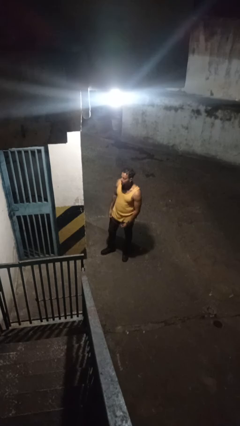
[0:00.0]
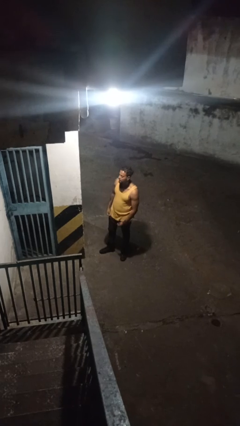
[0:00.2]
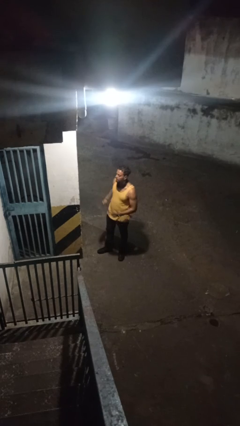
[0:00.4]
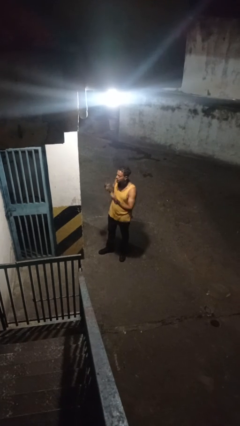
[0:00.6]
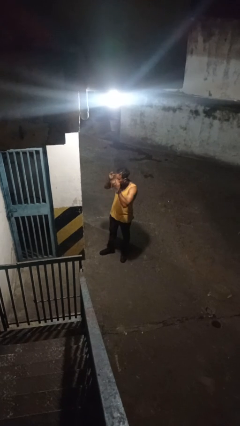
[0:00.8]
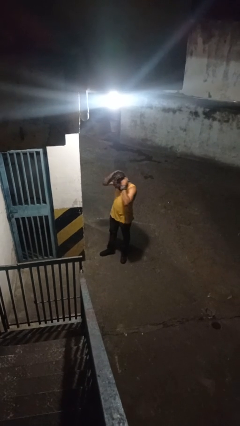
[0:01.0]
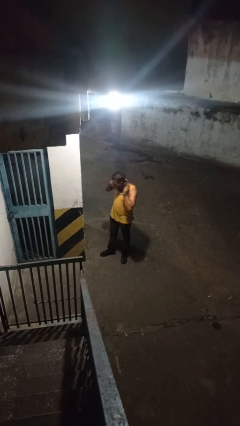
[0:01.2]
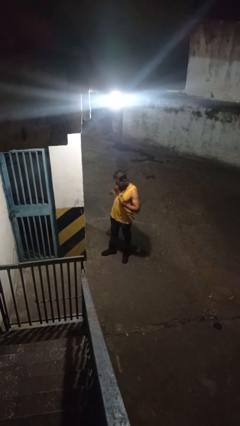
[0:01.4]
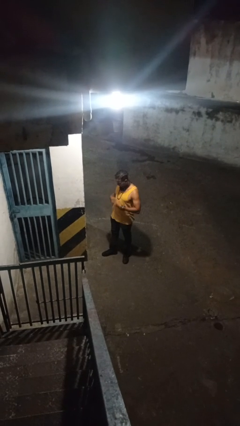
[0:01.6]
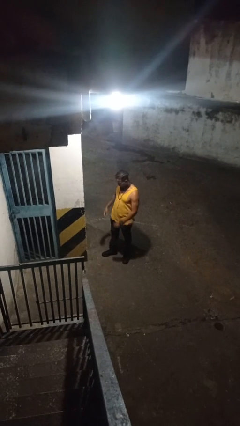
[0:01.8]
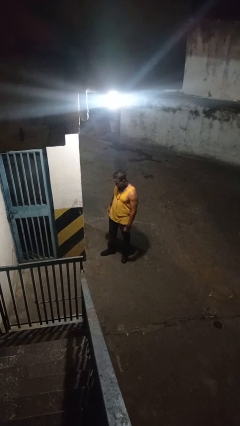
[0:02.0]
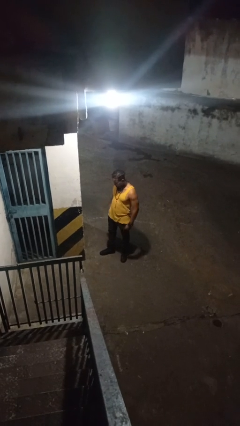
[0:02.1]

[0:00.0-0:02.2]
person puts on necklace

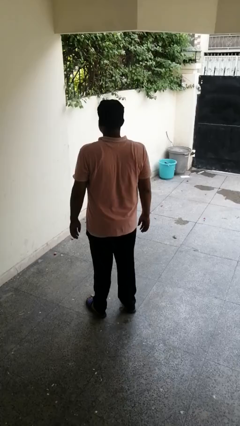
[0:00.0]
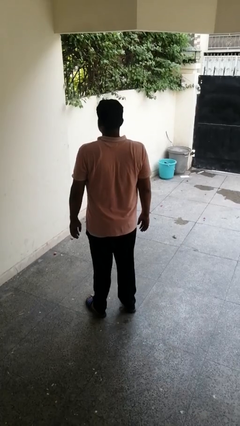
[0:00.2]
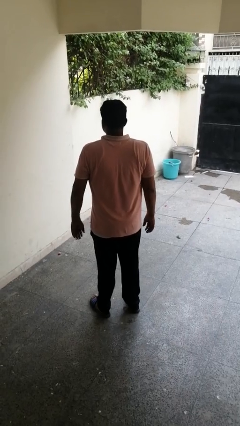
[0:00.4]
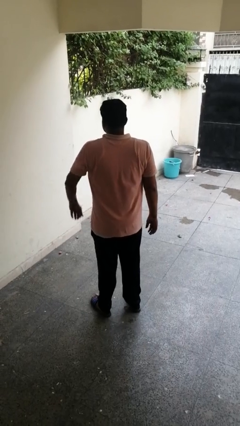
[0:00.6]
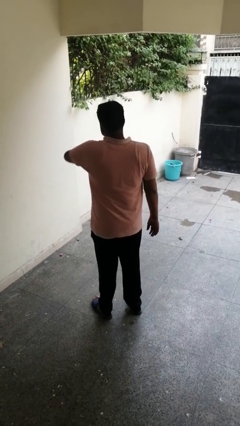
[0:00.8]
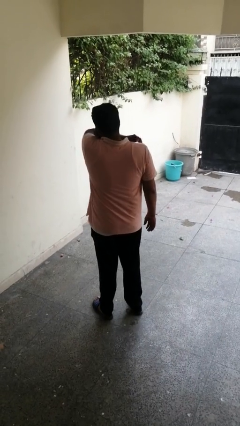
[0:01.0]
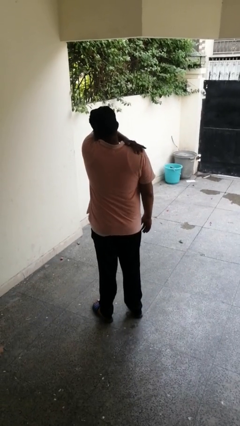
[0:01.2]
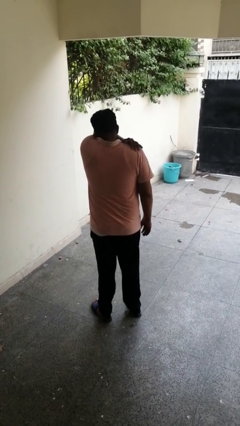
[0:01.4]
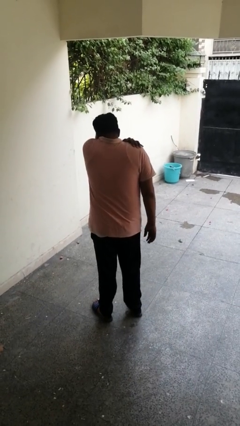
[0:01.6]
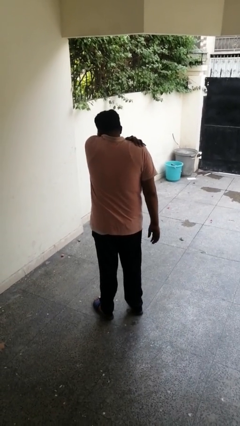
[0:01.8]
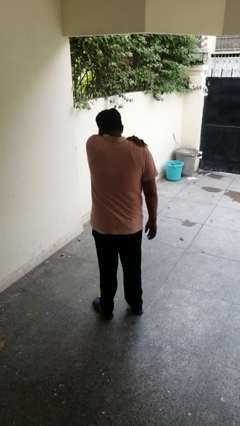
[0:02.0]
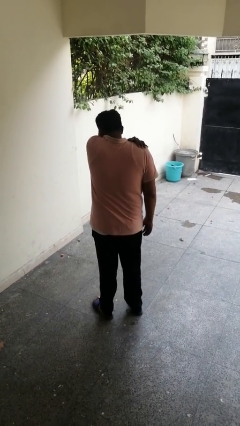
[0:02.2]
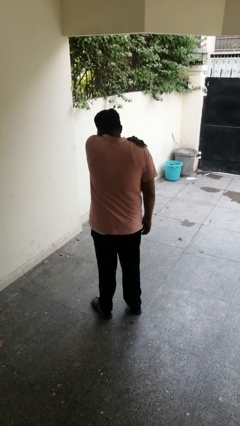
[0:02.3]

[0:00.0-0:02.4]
person sneezes into arm

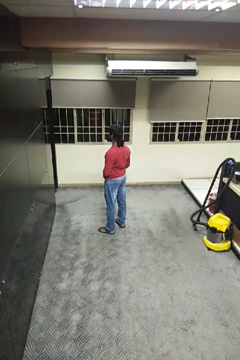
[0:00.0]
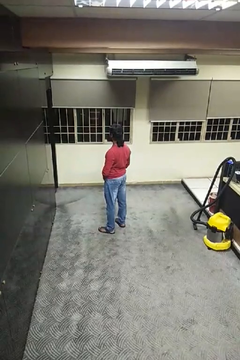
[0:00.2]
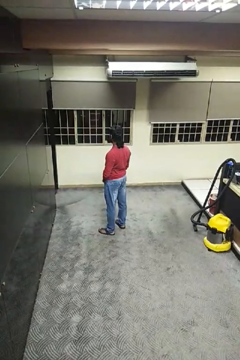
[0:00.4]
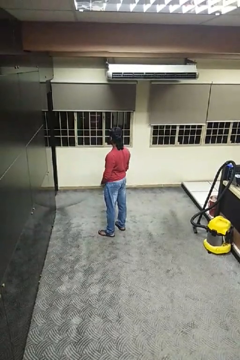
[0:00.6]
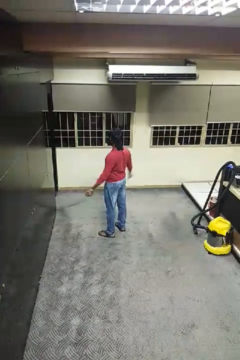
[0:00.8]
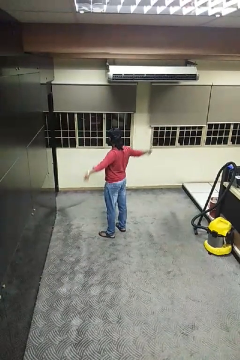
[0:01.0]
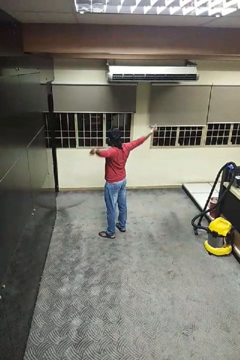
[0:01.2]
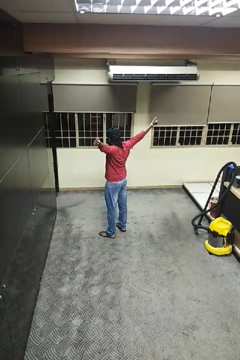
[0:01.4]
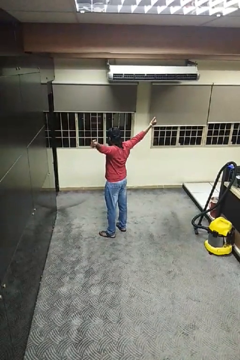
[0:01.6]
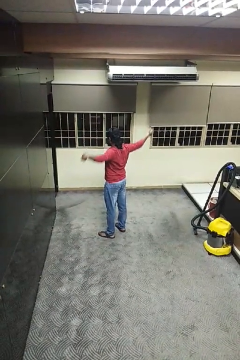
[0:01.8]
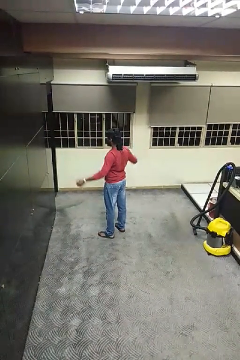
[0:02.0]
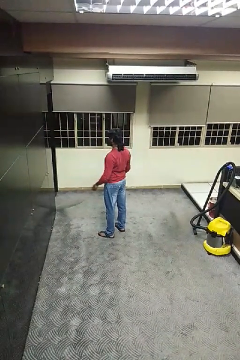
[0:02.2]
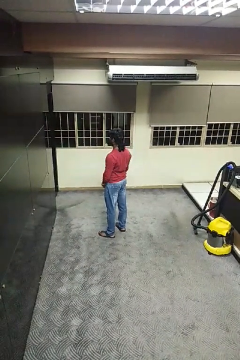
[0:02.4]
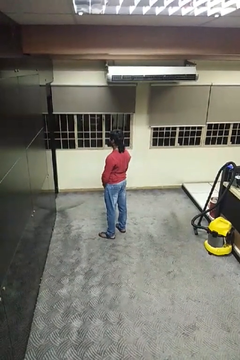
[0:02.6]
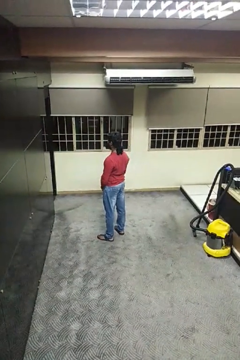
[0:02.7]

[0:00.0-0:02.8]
person stretches arms to side

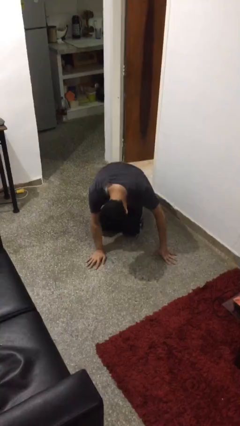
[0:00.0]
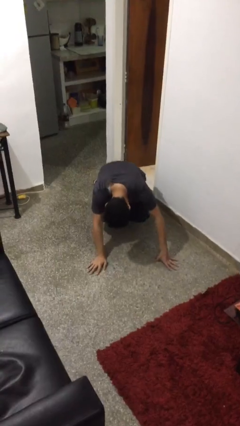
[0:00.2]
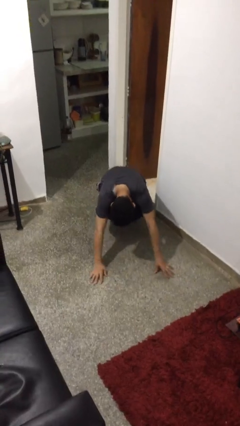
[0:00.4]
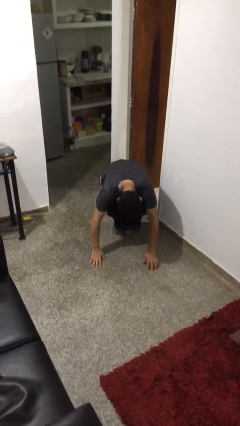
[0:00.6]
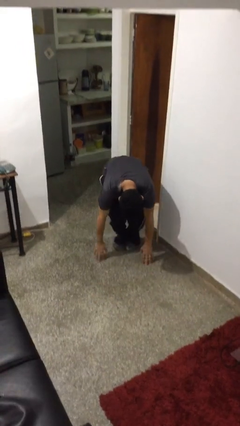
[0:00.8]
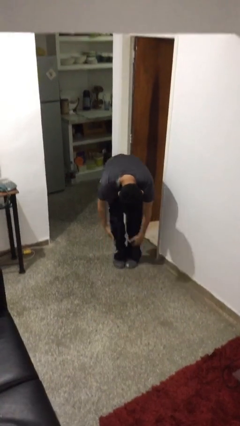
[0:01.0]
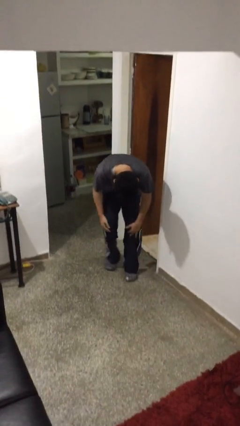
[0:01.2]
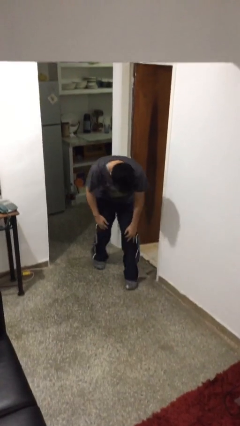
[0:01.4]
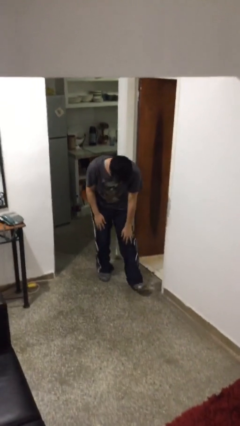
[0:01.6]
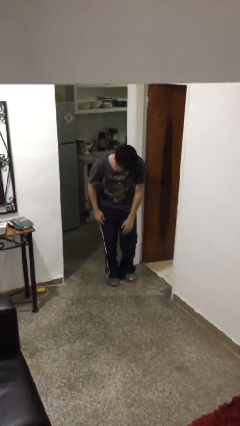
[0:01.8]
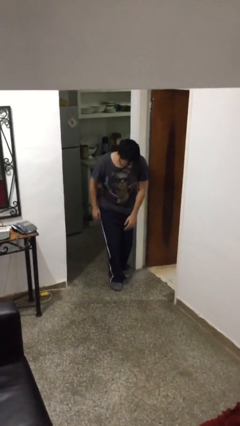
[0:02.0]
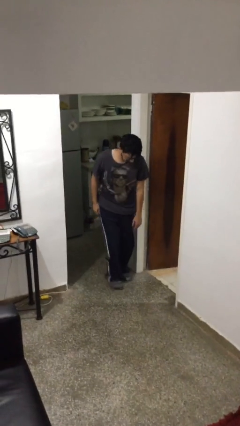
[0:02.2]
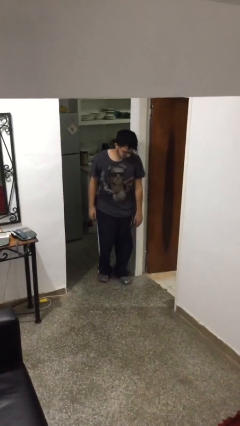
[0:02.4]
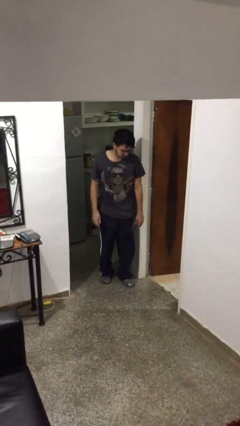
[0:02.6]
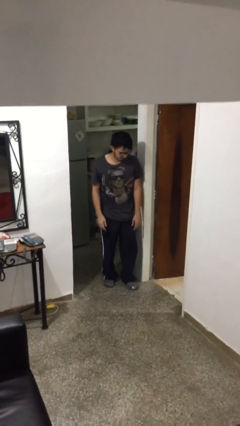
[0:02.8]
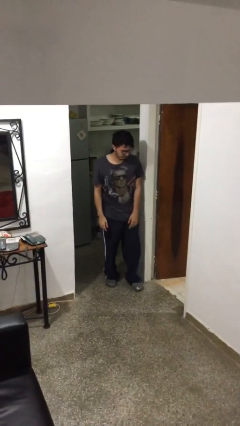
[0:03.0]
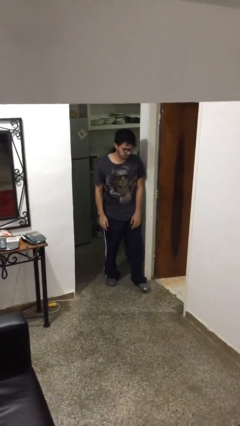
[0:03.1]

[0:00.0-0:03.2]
person stands up from floor

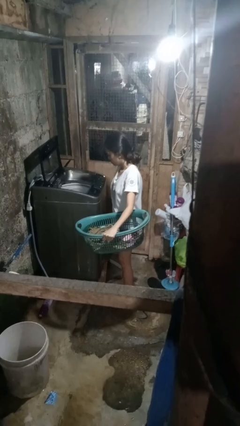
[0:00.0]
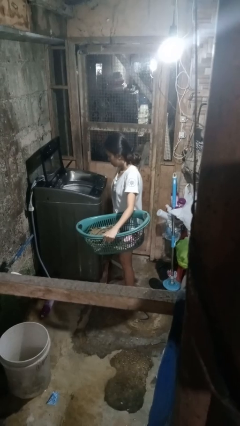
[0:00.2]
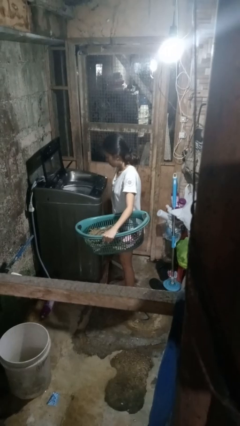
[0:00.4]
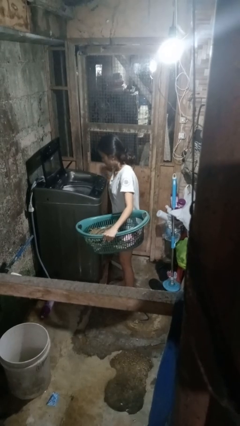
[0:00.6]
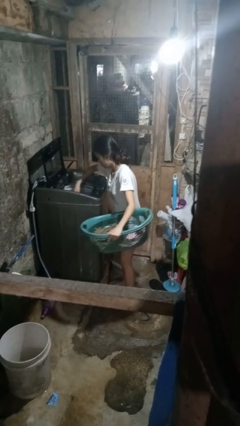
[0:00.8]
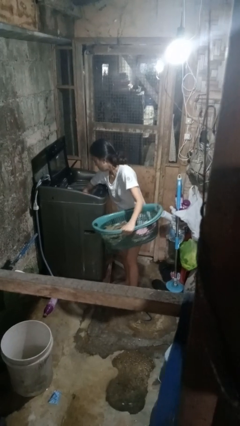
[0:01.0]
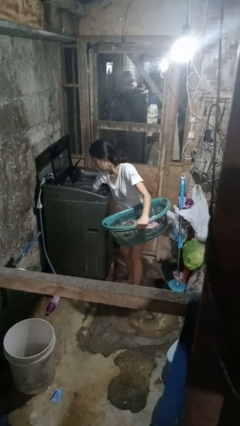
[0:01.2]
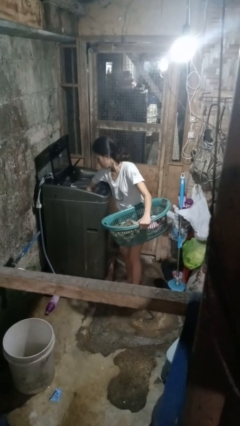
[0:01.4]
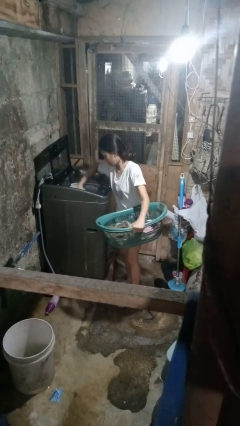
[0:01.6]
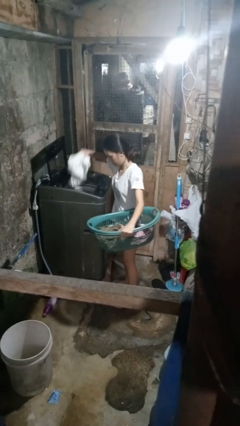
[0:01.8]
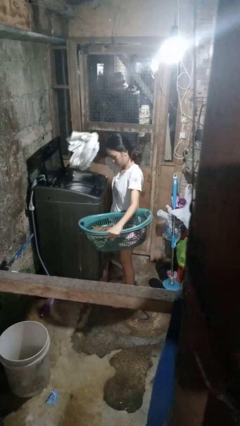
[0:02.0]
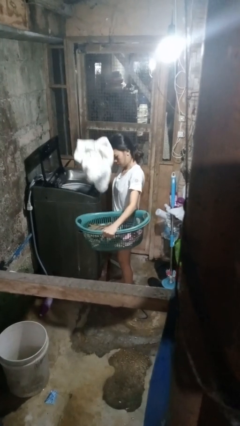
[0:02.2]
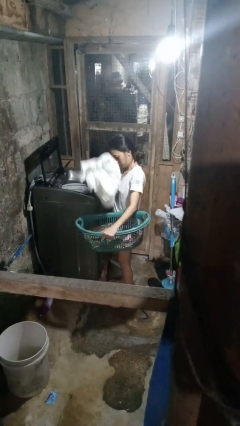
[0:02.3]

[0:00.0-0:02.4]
person unloads clotheswasher

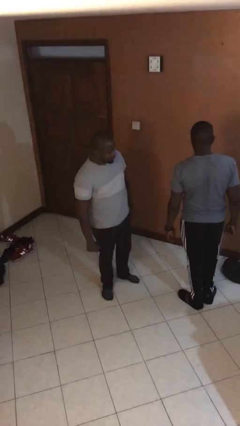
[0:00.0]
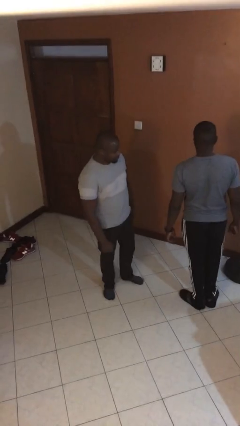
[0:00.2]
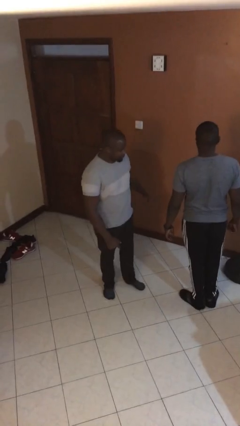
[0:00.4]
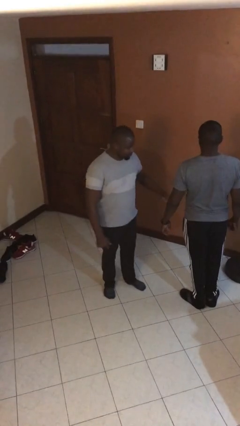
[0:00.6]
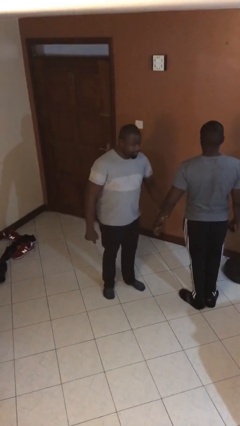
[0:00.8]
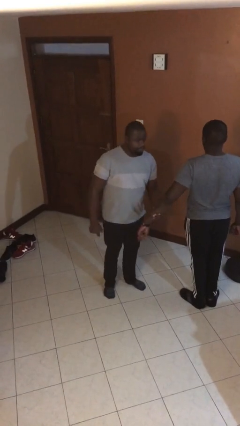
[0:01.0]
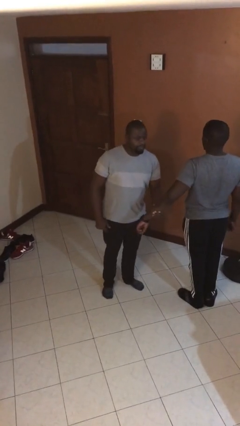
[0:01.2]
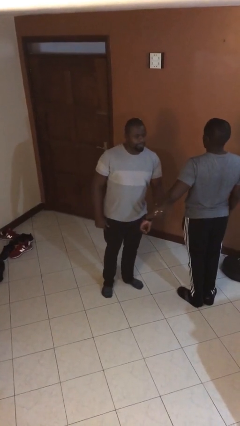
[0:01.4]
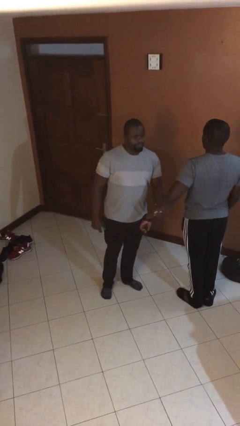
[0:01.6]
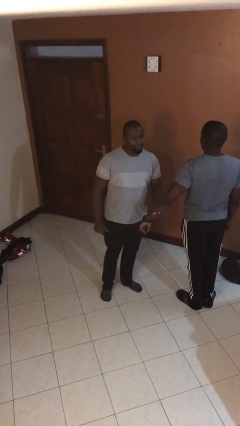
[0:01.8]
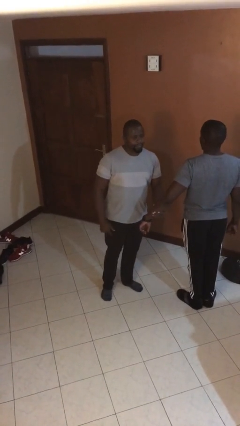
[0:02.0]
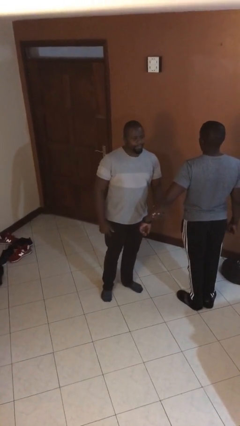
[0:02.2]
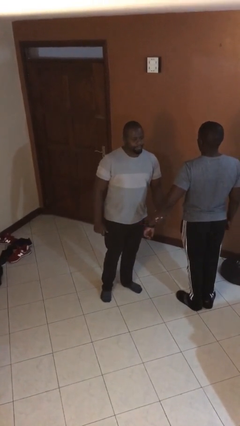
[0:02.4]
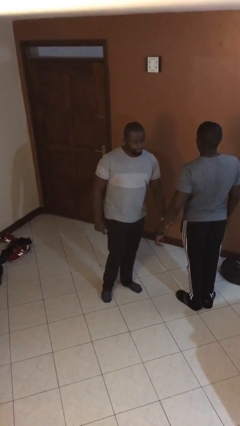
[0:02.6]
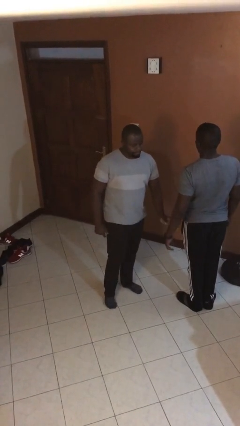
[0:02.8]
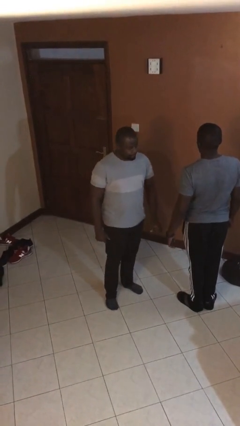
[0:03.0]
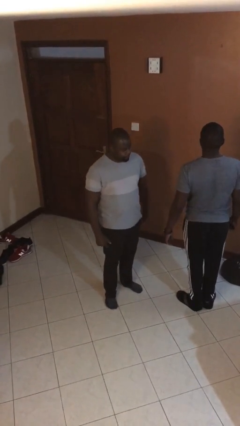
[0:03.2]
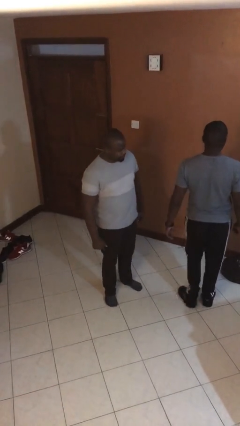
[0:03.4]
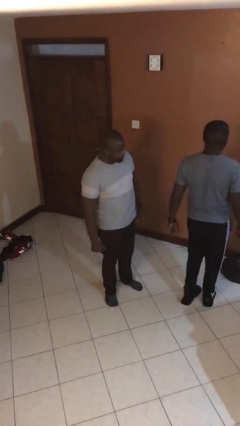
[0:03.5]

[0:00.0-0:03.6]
person grabs person by forearm

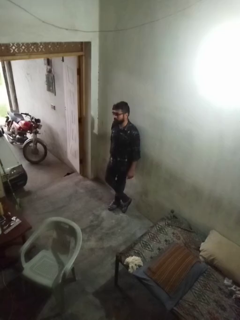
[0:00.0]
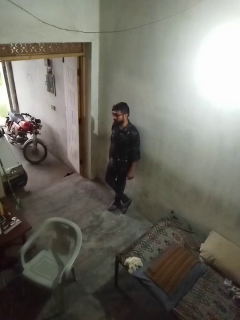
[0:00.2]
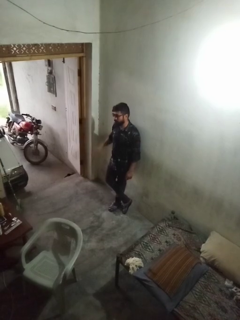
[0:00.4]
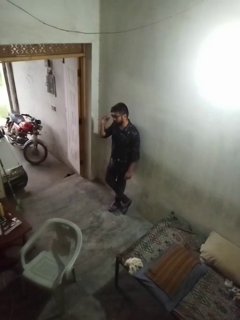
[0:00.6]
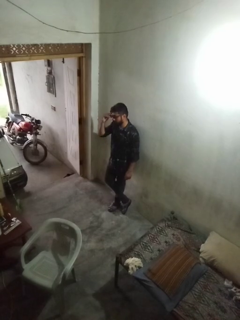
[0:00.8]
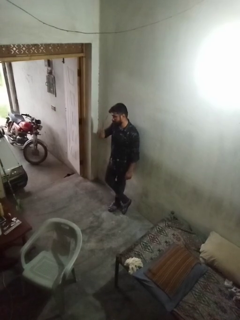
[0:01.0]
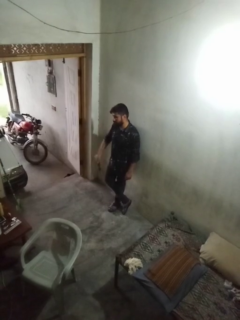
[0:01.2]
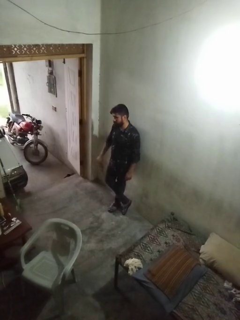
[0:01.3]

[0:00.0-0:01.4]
person takes off sunglasses

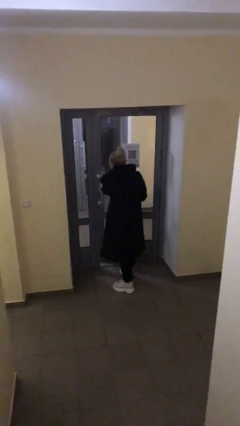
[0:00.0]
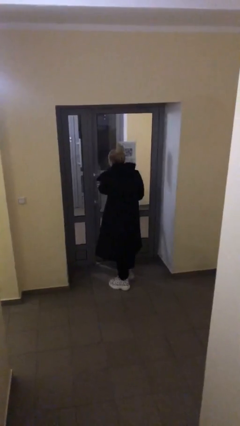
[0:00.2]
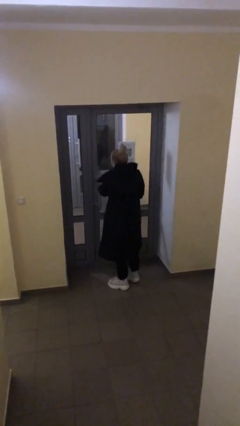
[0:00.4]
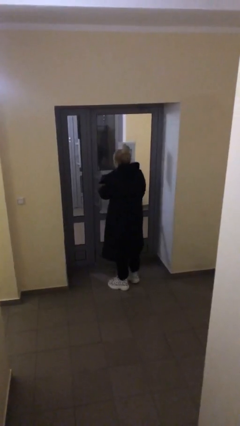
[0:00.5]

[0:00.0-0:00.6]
person closes facility door
